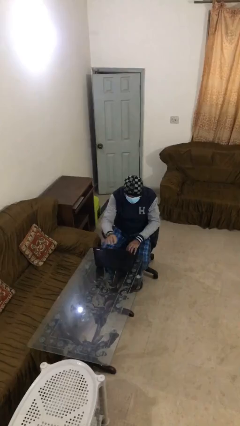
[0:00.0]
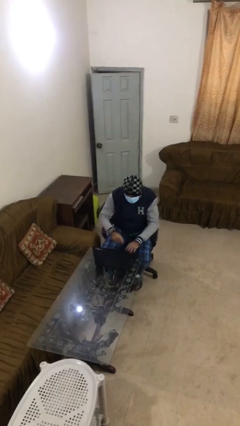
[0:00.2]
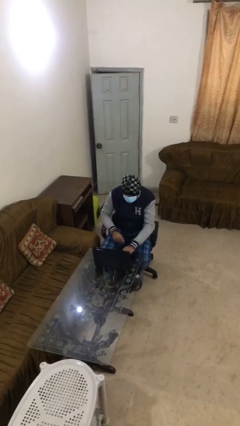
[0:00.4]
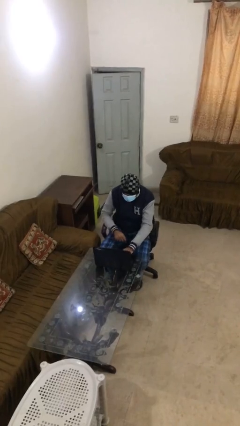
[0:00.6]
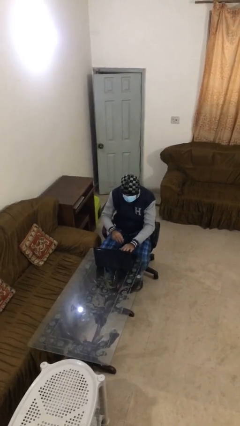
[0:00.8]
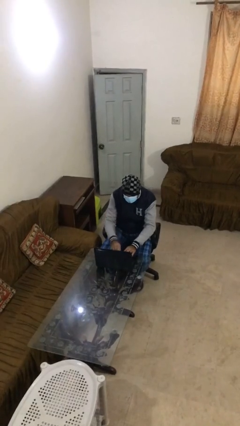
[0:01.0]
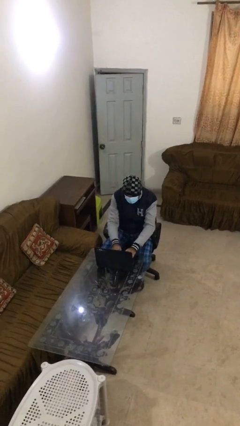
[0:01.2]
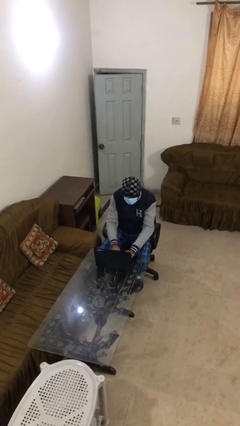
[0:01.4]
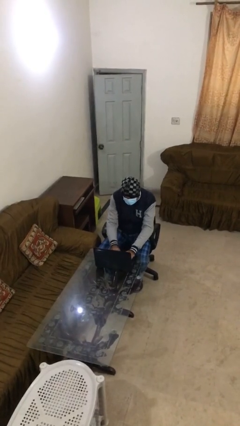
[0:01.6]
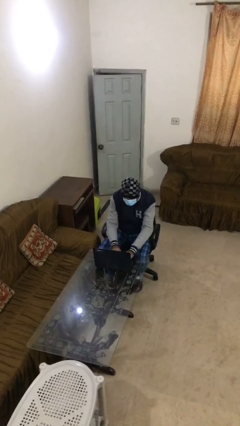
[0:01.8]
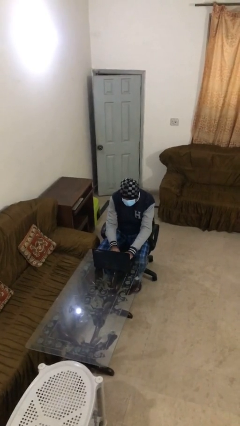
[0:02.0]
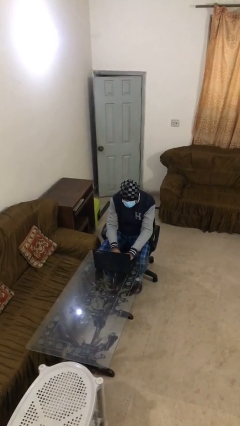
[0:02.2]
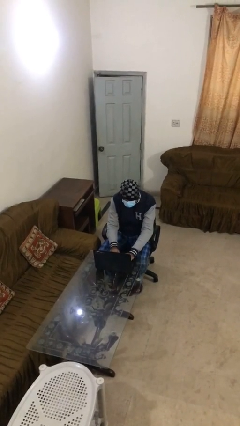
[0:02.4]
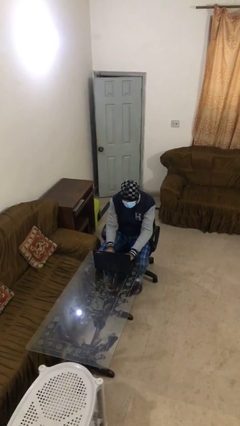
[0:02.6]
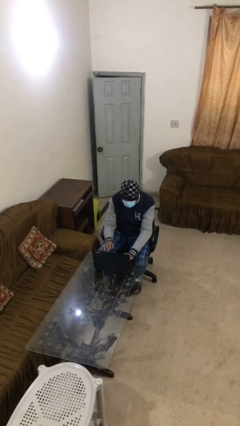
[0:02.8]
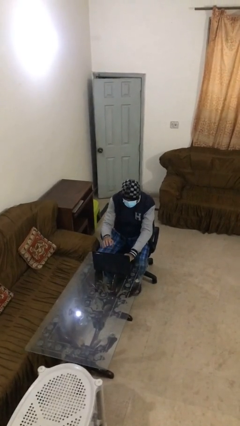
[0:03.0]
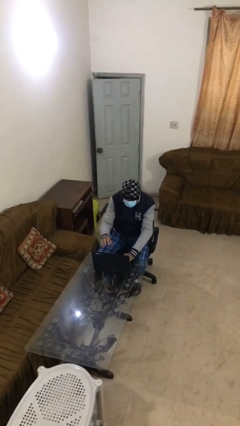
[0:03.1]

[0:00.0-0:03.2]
person interacts with laptop

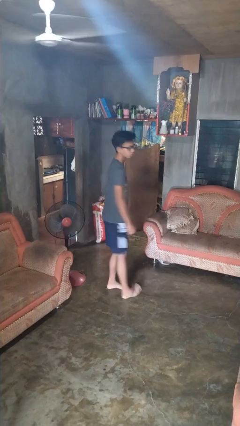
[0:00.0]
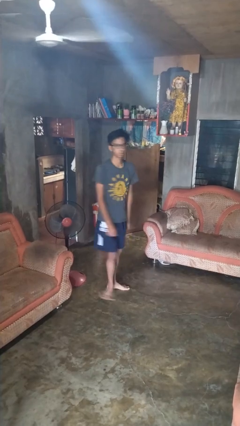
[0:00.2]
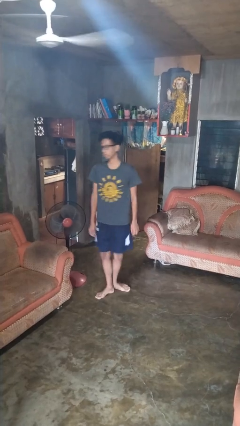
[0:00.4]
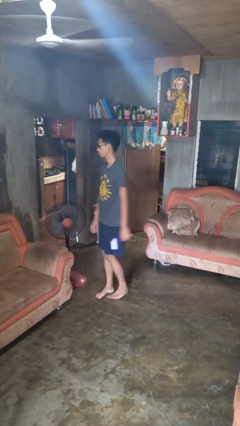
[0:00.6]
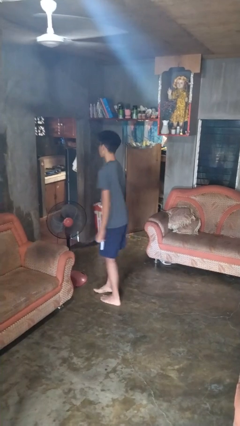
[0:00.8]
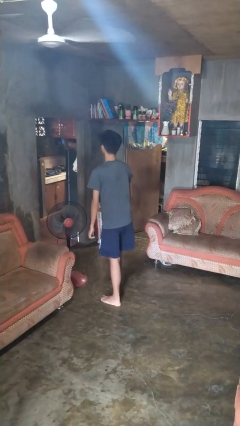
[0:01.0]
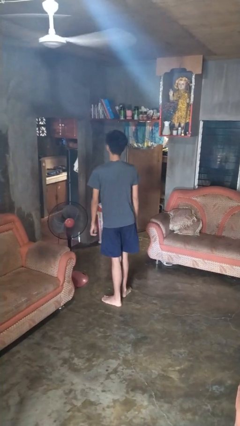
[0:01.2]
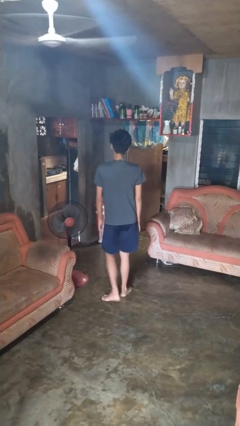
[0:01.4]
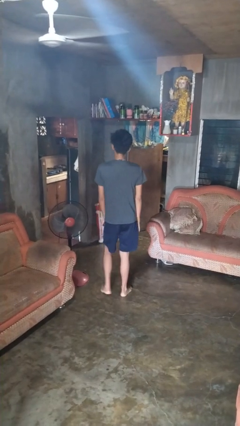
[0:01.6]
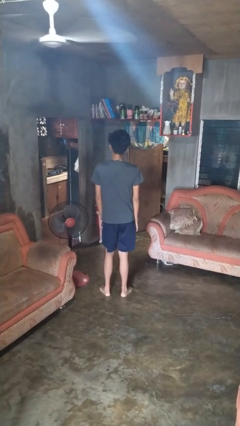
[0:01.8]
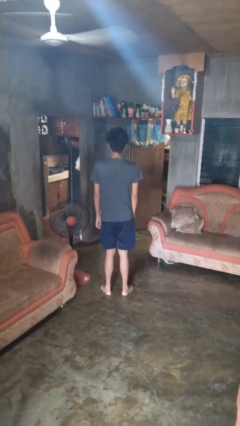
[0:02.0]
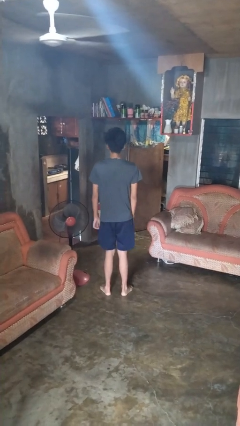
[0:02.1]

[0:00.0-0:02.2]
person twirls

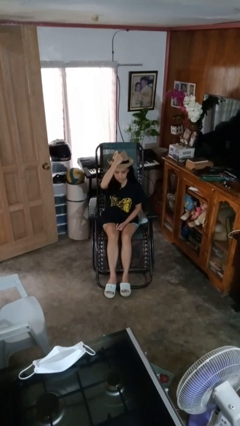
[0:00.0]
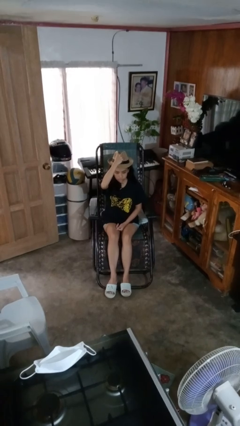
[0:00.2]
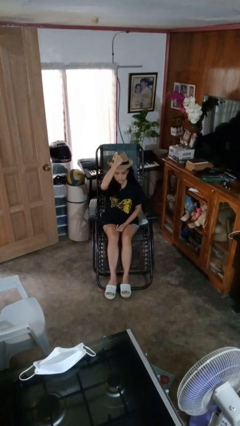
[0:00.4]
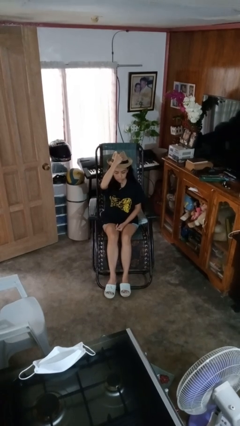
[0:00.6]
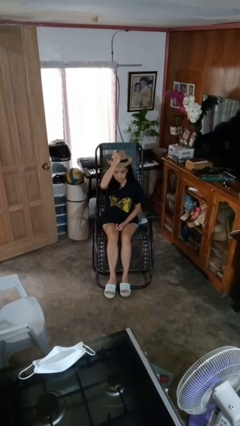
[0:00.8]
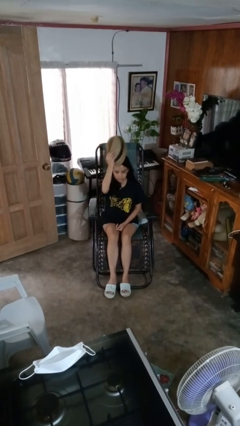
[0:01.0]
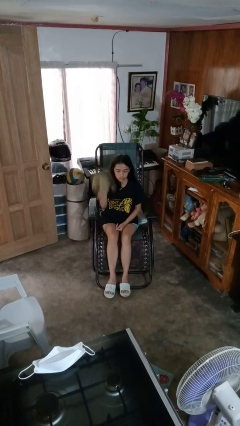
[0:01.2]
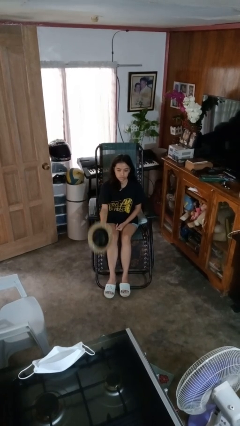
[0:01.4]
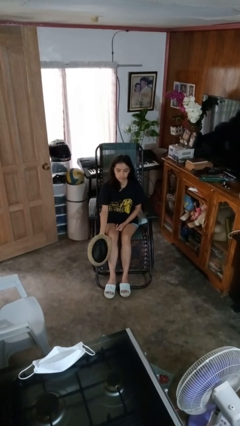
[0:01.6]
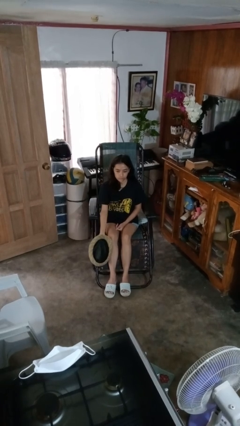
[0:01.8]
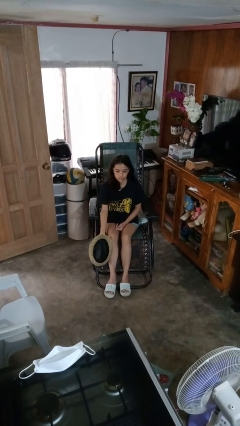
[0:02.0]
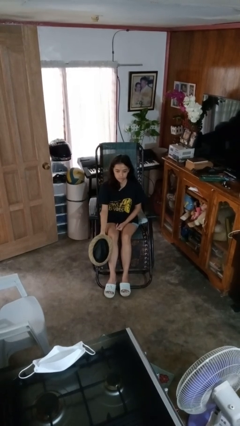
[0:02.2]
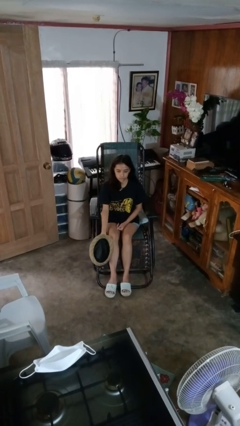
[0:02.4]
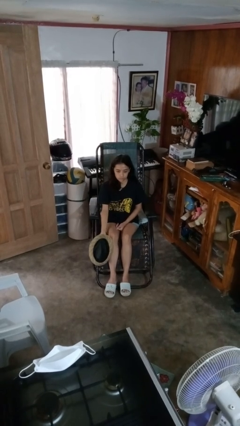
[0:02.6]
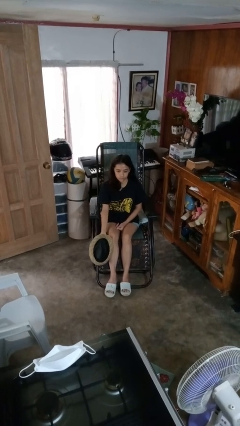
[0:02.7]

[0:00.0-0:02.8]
person takes off hat

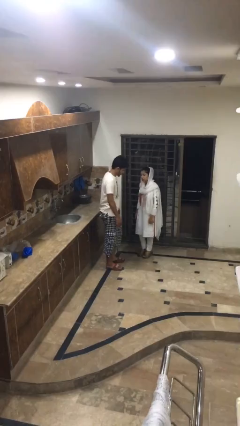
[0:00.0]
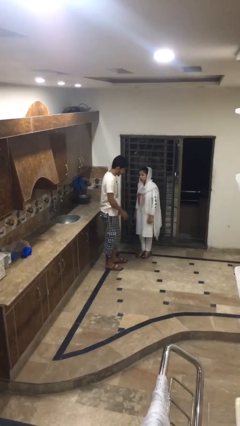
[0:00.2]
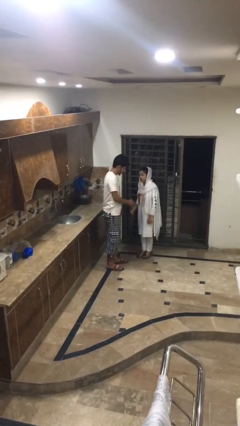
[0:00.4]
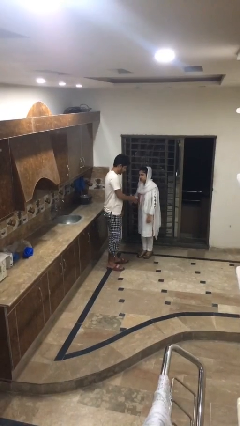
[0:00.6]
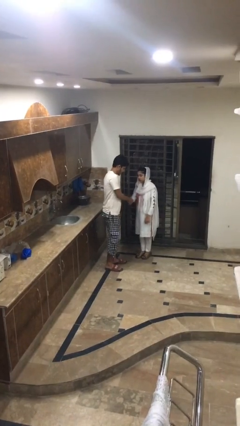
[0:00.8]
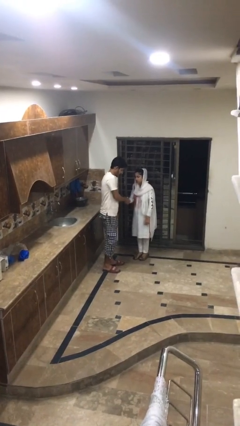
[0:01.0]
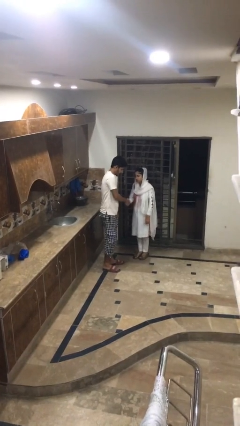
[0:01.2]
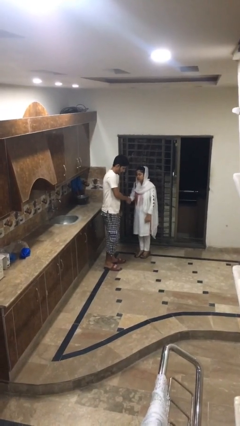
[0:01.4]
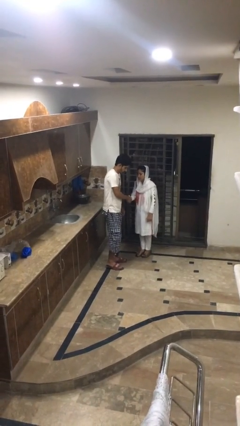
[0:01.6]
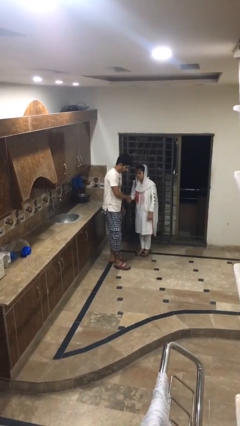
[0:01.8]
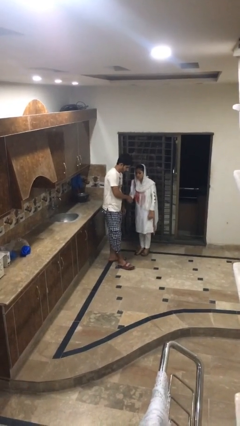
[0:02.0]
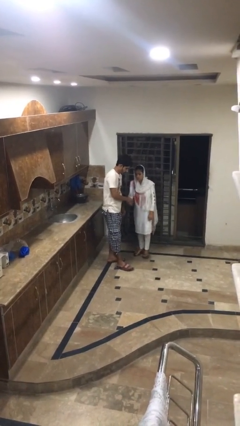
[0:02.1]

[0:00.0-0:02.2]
person shakes hand

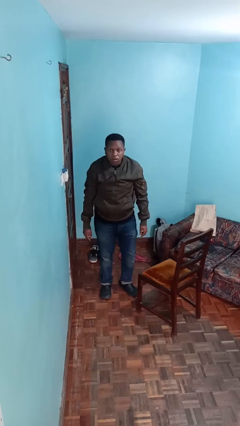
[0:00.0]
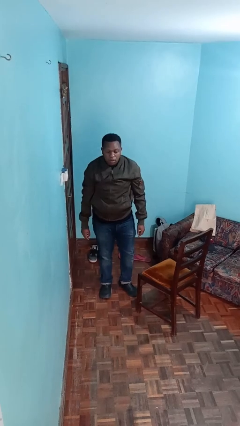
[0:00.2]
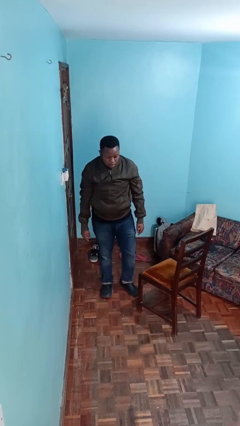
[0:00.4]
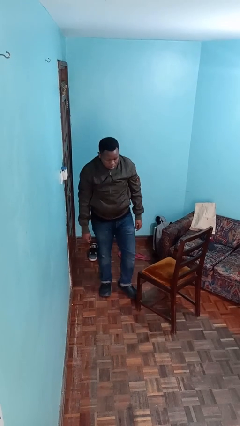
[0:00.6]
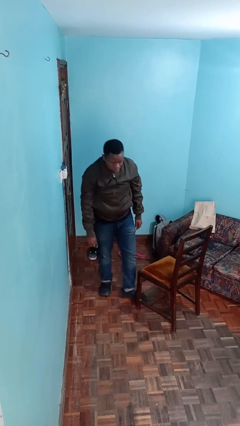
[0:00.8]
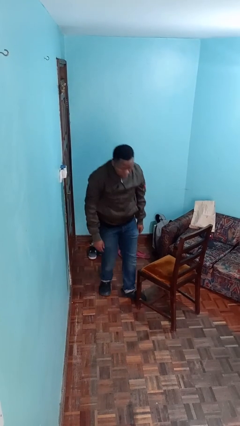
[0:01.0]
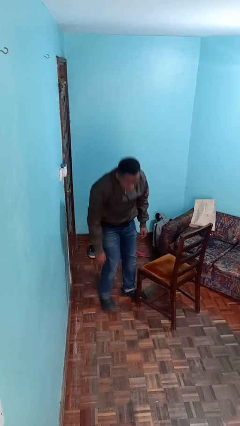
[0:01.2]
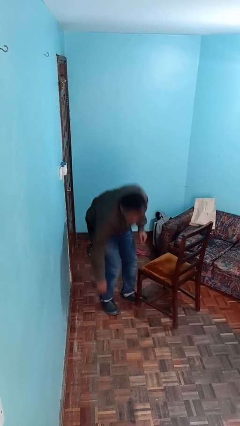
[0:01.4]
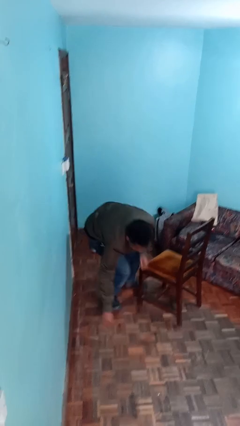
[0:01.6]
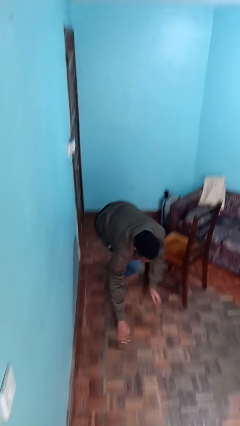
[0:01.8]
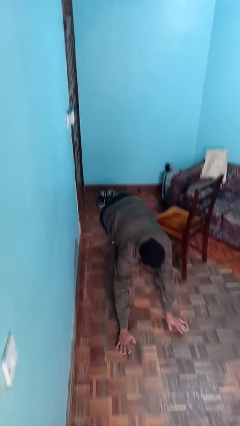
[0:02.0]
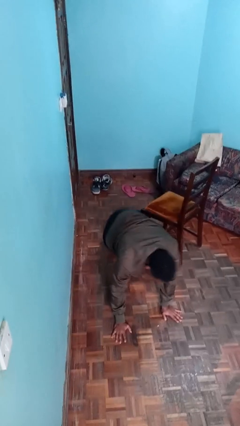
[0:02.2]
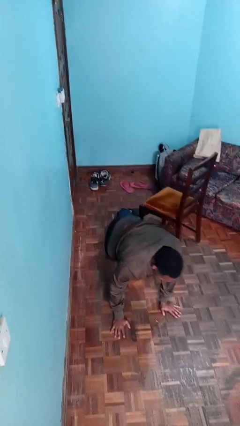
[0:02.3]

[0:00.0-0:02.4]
person trips on object on floor

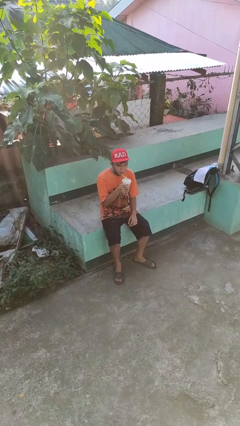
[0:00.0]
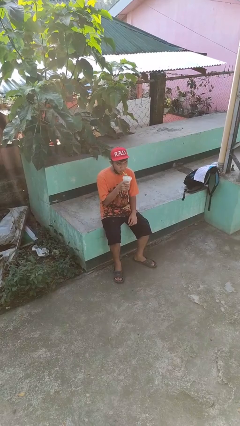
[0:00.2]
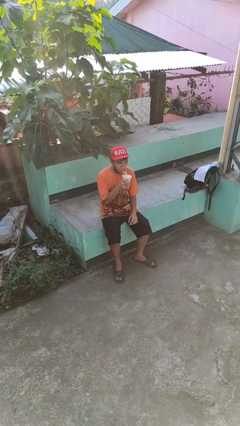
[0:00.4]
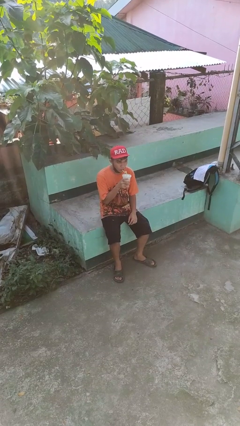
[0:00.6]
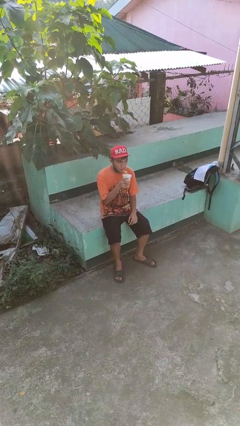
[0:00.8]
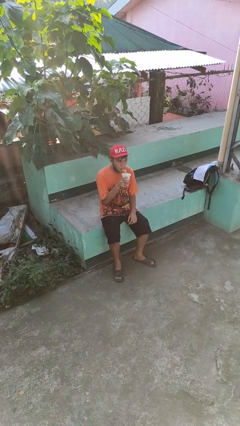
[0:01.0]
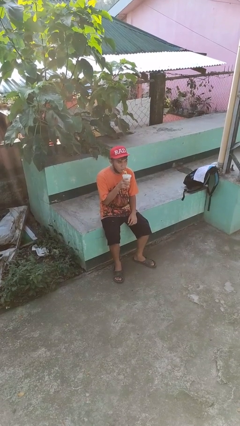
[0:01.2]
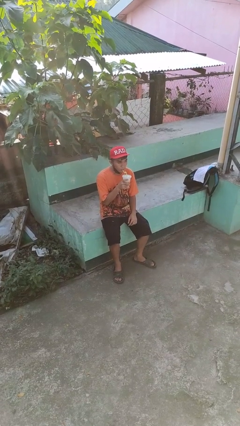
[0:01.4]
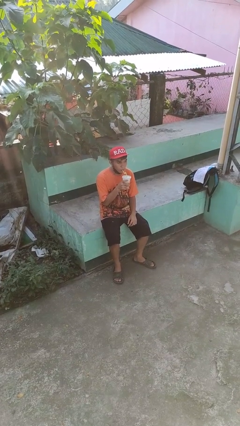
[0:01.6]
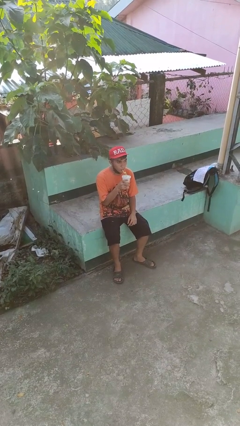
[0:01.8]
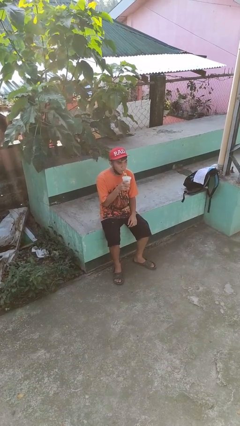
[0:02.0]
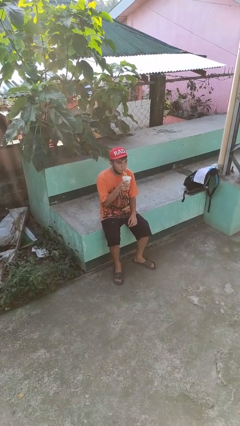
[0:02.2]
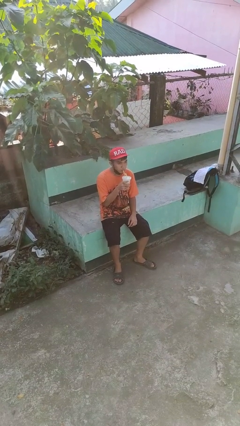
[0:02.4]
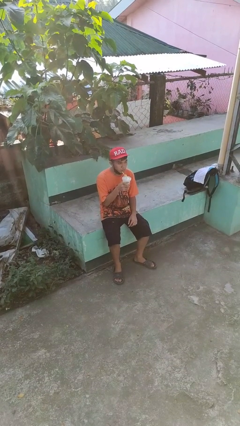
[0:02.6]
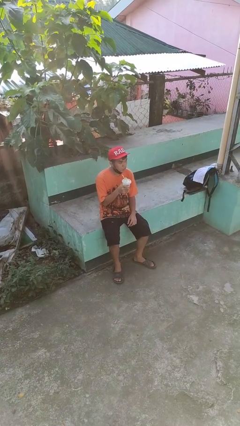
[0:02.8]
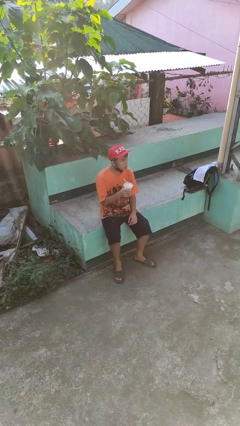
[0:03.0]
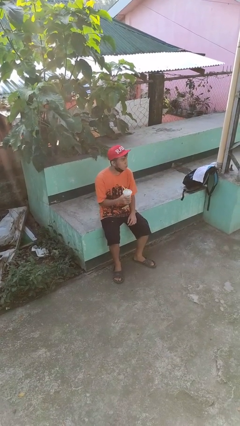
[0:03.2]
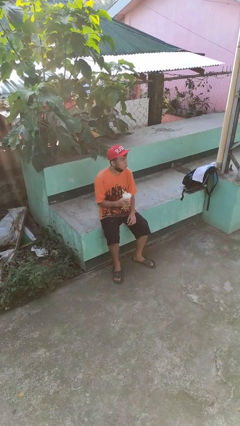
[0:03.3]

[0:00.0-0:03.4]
person drinks from straw

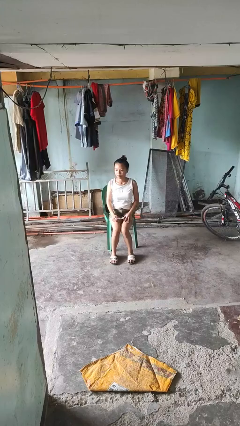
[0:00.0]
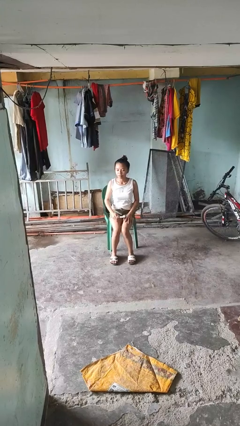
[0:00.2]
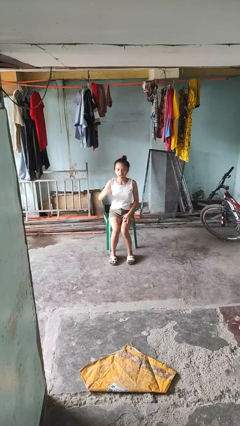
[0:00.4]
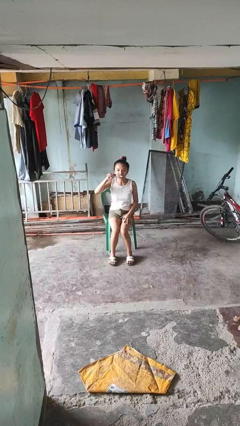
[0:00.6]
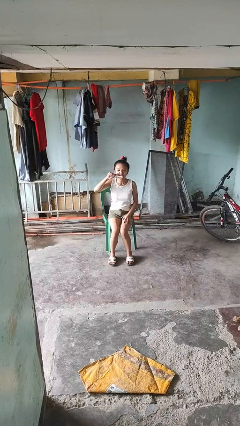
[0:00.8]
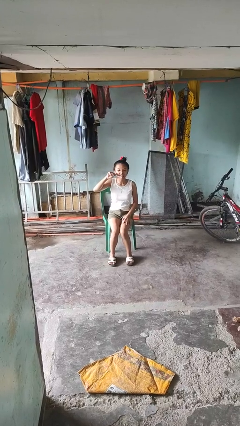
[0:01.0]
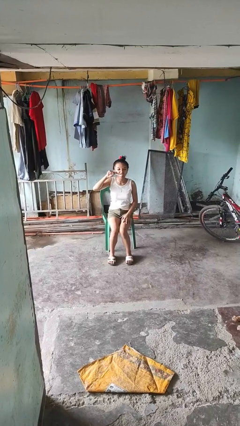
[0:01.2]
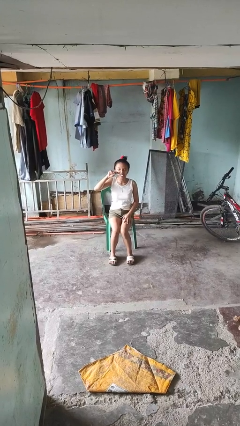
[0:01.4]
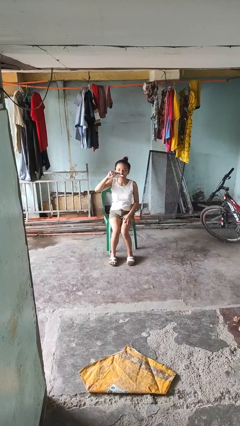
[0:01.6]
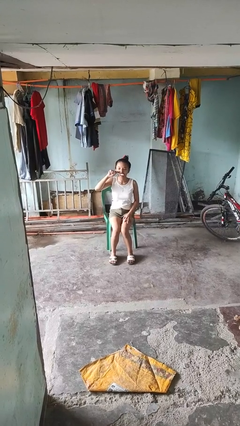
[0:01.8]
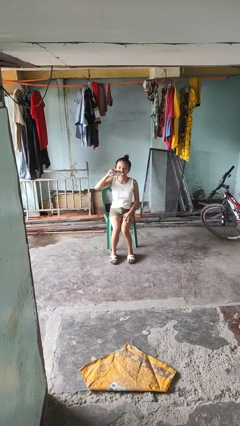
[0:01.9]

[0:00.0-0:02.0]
person brushes teeth
